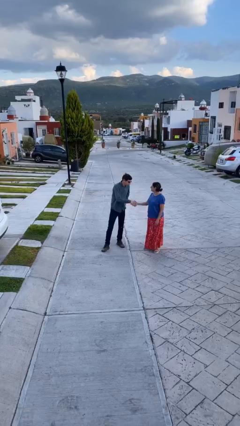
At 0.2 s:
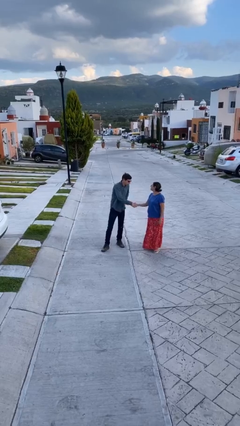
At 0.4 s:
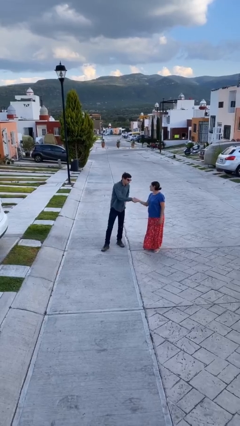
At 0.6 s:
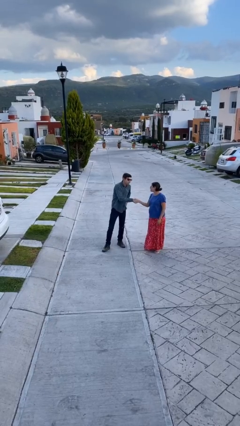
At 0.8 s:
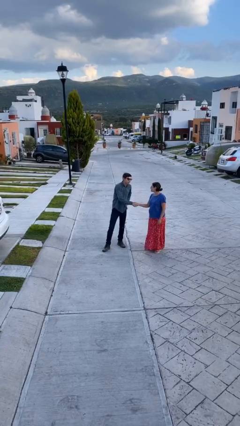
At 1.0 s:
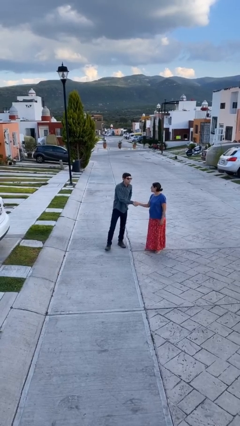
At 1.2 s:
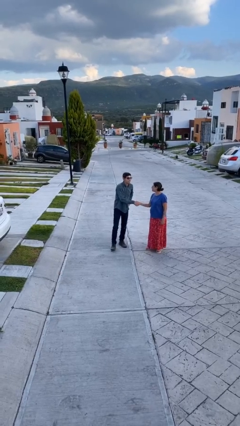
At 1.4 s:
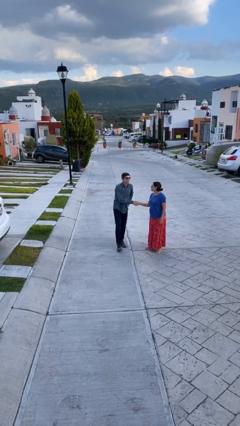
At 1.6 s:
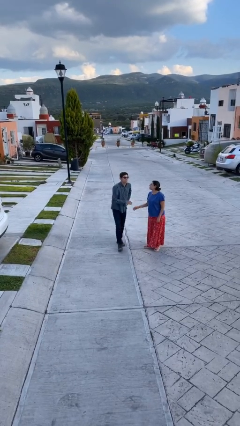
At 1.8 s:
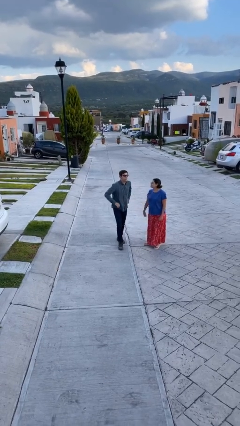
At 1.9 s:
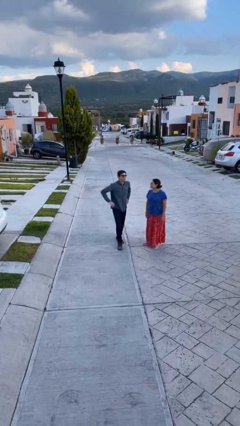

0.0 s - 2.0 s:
person shakes hand

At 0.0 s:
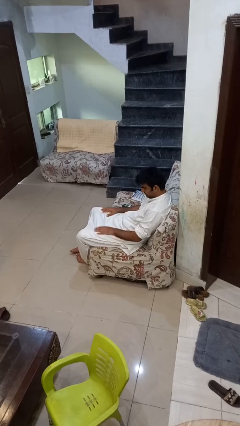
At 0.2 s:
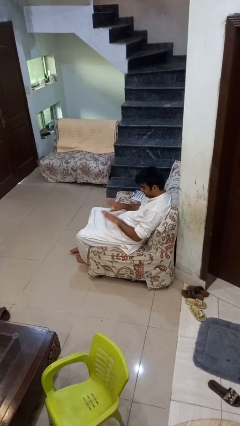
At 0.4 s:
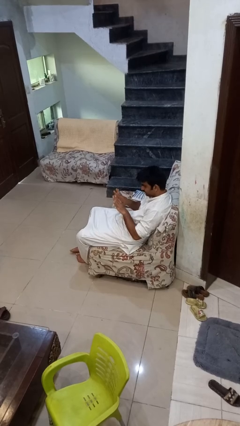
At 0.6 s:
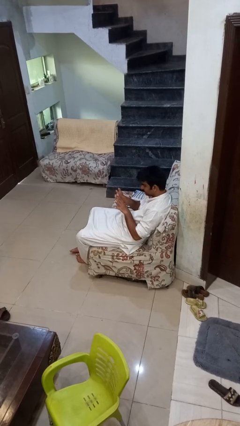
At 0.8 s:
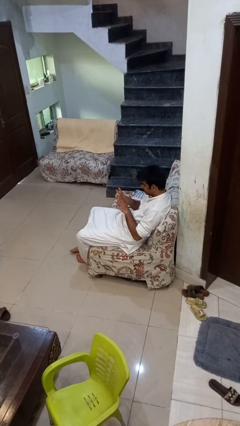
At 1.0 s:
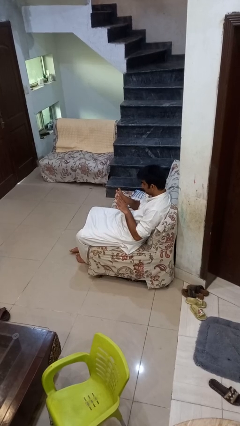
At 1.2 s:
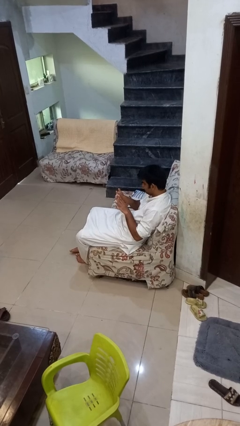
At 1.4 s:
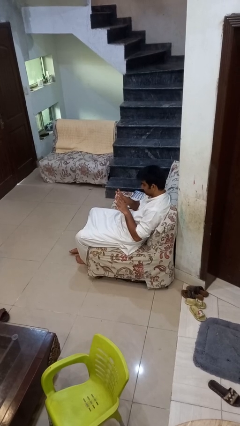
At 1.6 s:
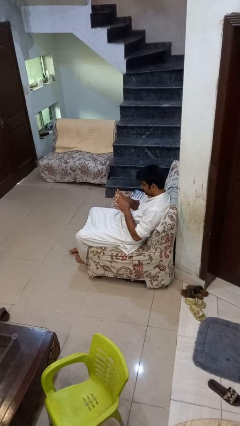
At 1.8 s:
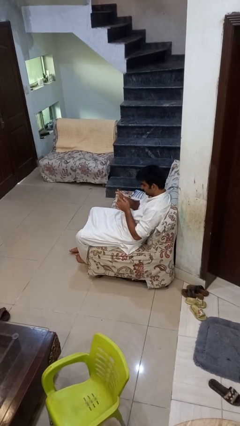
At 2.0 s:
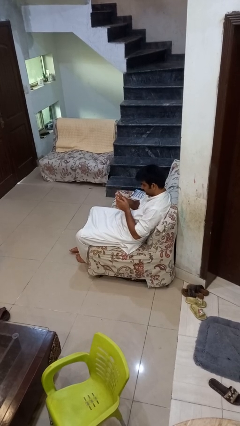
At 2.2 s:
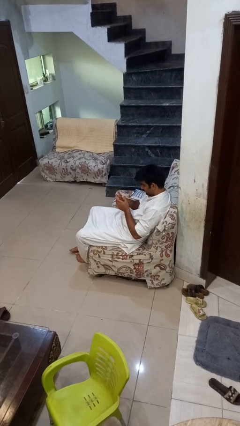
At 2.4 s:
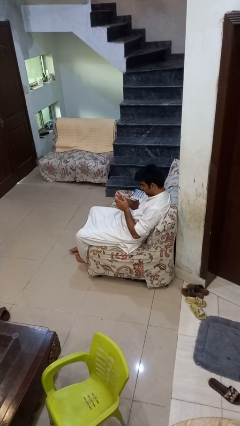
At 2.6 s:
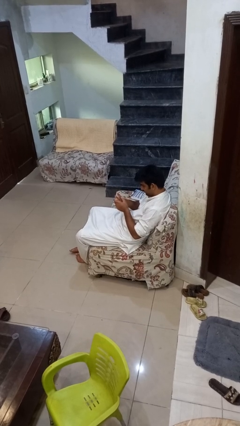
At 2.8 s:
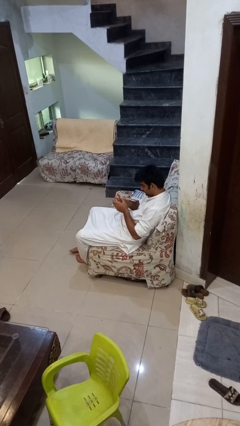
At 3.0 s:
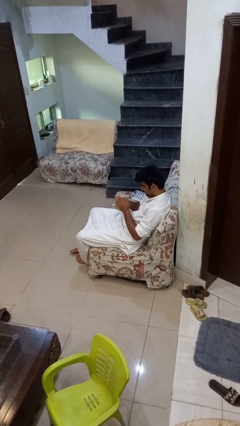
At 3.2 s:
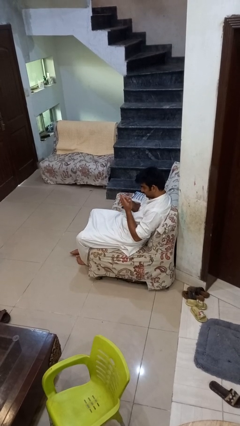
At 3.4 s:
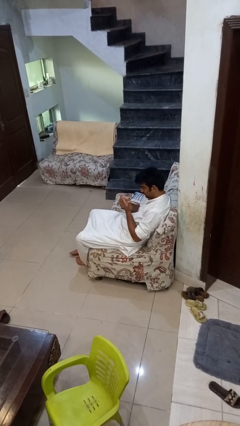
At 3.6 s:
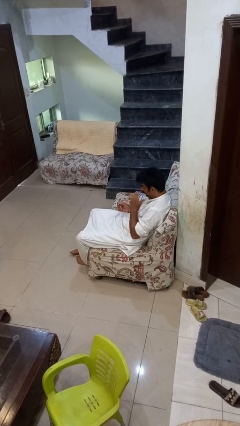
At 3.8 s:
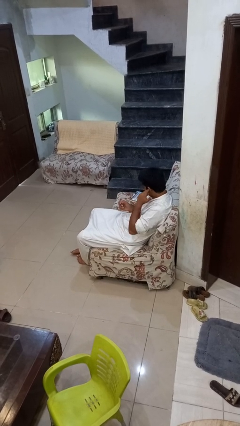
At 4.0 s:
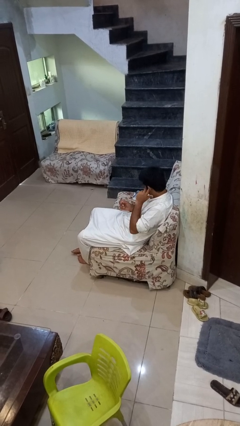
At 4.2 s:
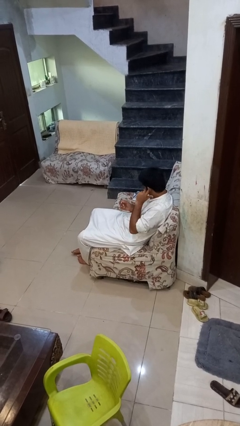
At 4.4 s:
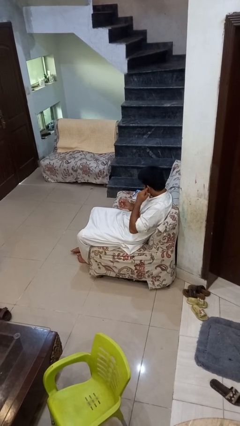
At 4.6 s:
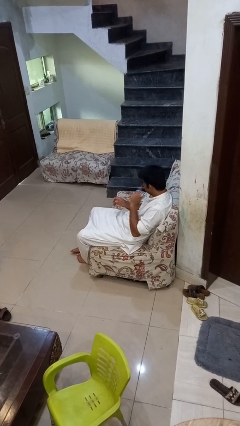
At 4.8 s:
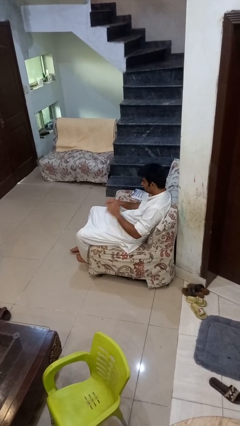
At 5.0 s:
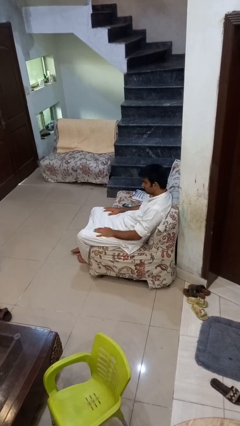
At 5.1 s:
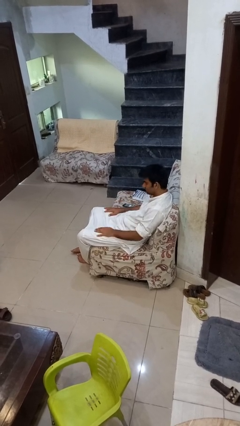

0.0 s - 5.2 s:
person looks at hands in lap

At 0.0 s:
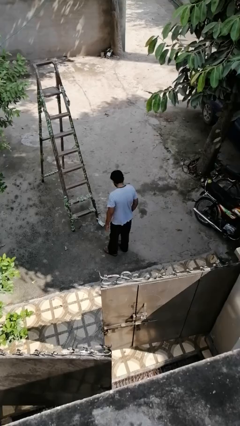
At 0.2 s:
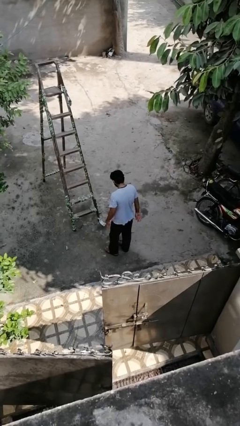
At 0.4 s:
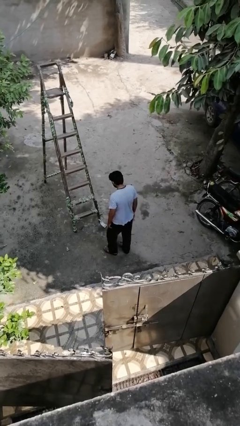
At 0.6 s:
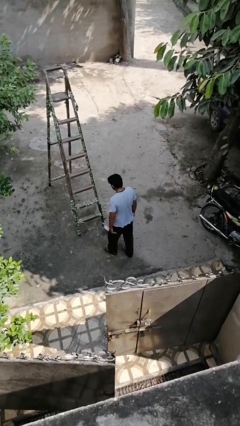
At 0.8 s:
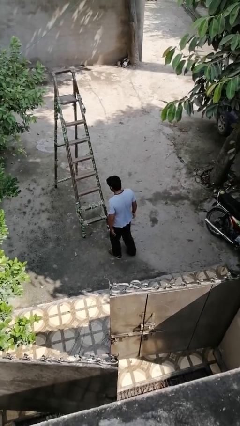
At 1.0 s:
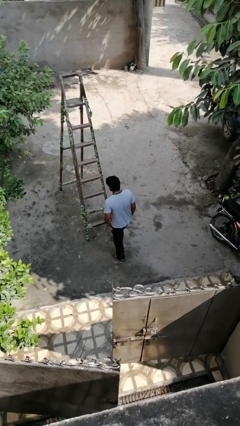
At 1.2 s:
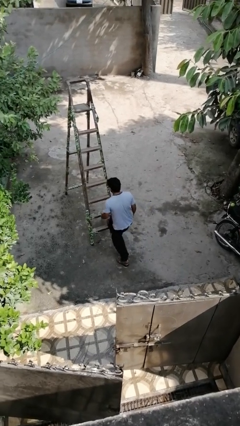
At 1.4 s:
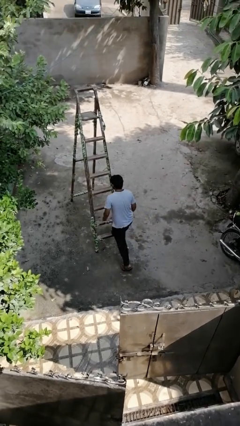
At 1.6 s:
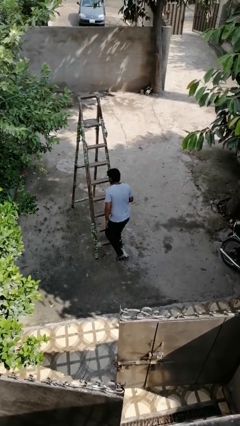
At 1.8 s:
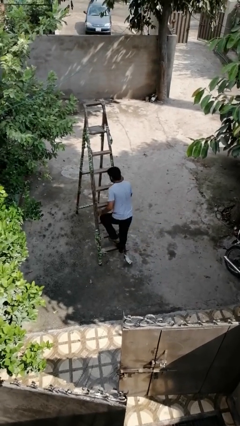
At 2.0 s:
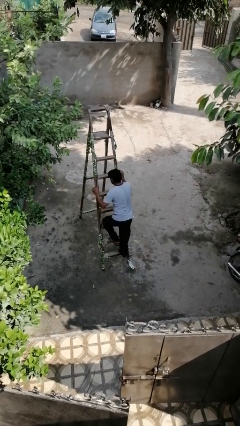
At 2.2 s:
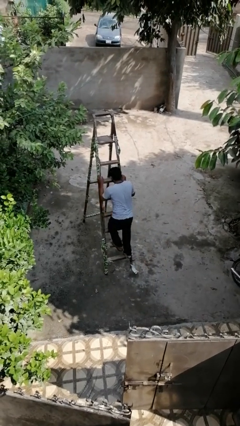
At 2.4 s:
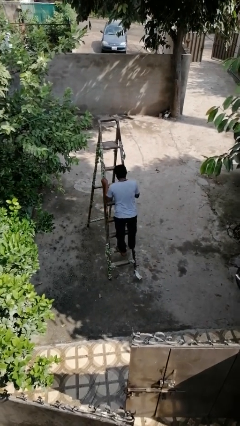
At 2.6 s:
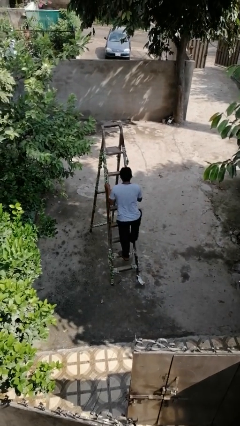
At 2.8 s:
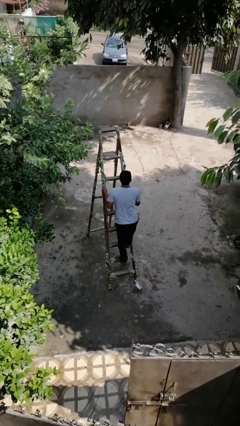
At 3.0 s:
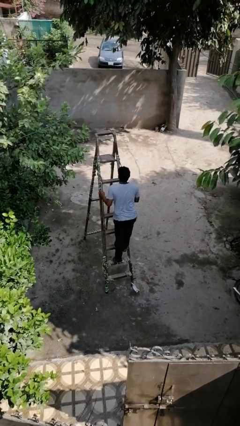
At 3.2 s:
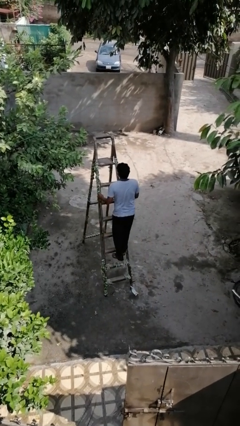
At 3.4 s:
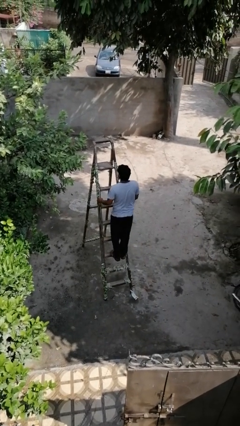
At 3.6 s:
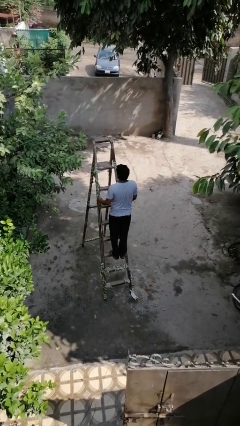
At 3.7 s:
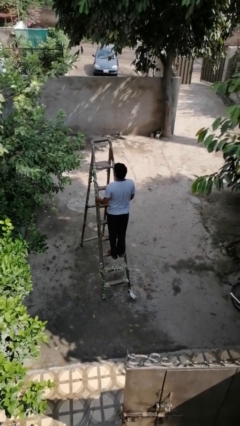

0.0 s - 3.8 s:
person climbs up ladder

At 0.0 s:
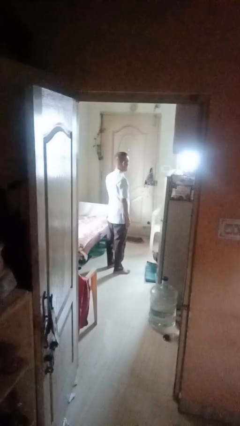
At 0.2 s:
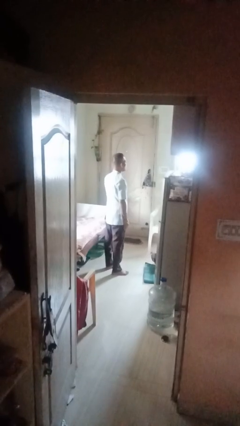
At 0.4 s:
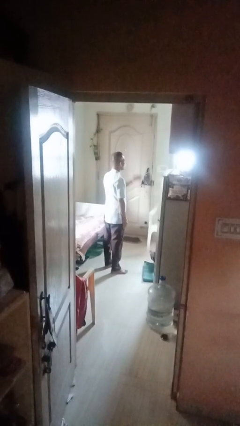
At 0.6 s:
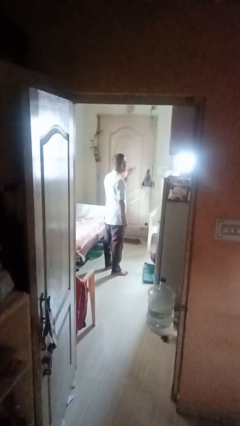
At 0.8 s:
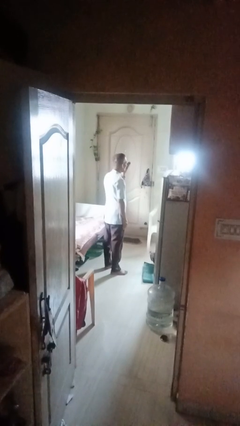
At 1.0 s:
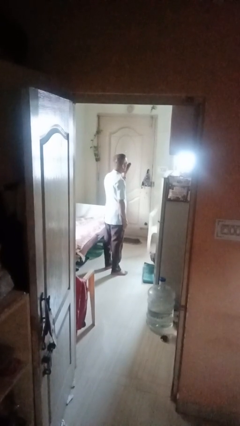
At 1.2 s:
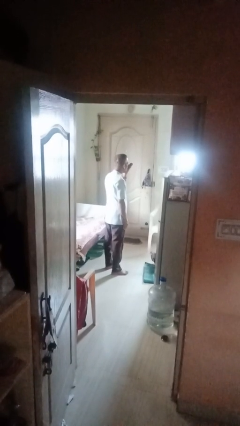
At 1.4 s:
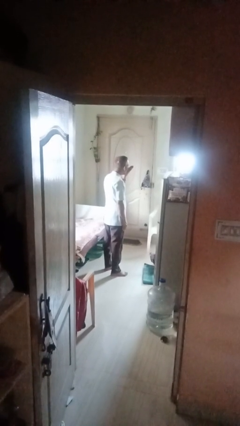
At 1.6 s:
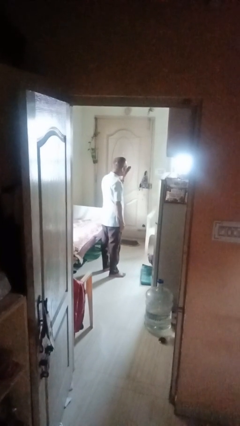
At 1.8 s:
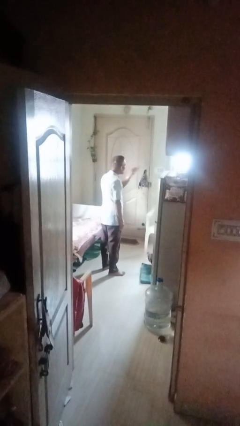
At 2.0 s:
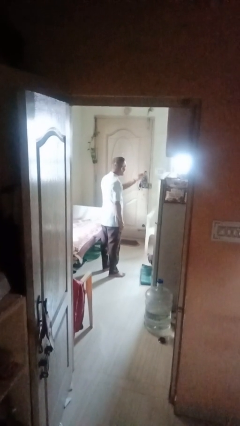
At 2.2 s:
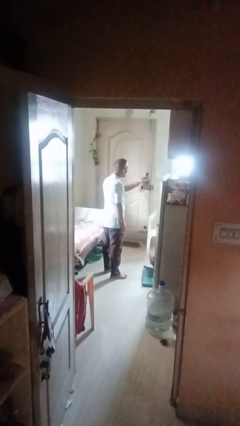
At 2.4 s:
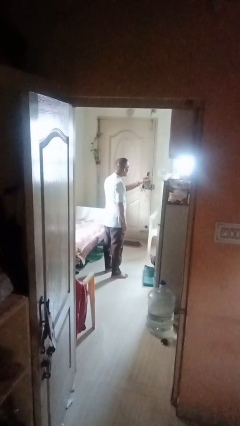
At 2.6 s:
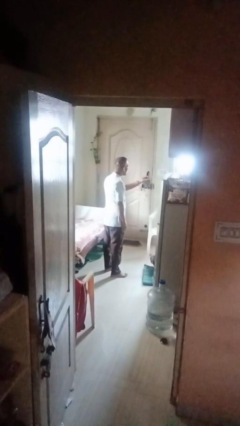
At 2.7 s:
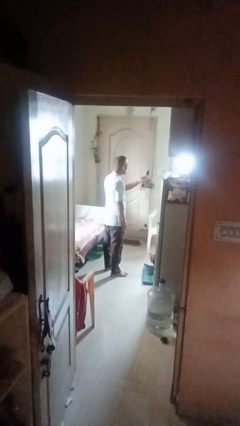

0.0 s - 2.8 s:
person gestures blow kiss

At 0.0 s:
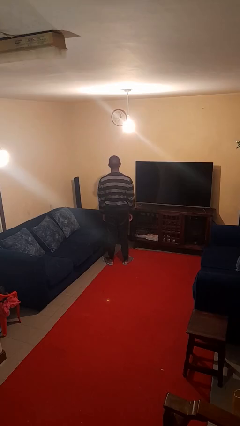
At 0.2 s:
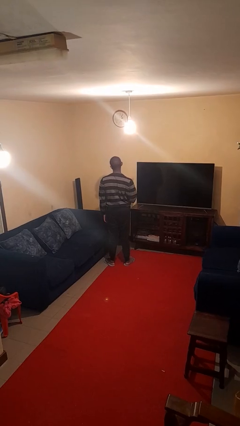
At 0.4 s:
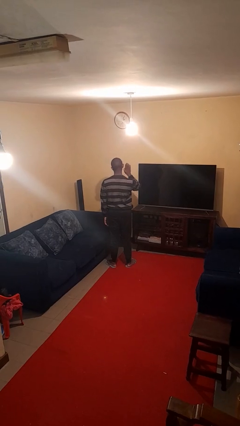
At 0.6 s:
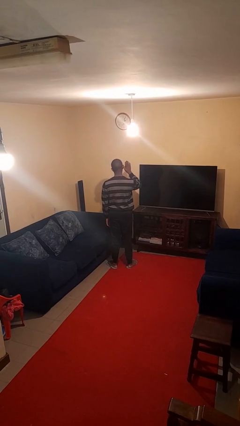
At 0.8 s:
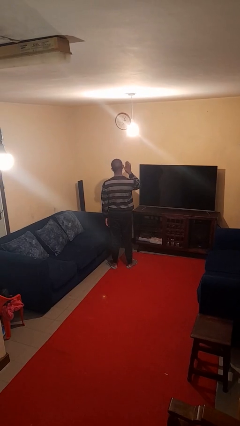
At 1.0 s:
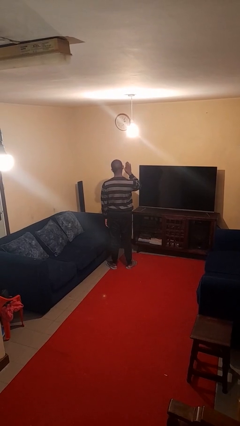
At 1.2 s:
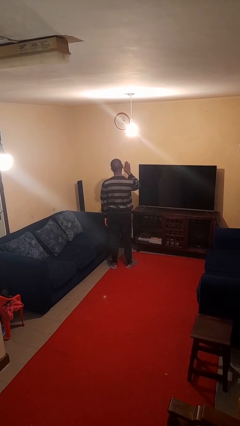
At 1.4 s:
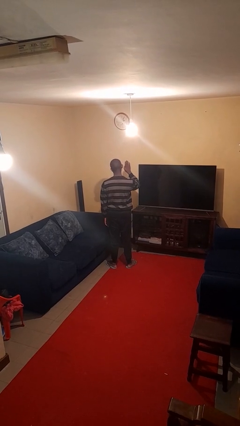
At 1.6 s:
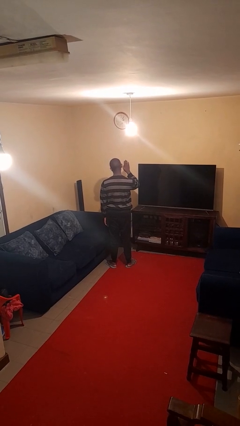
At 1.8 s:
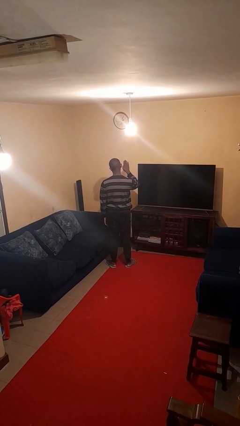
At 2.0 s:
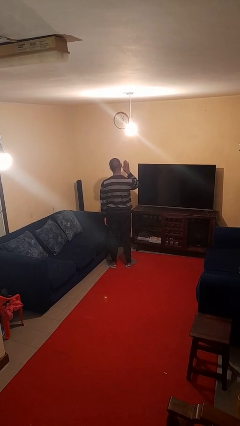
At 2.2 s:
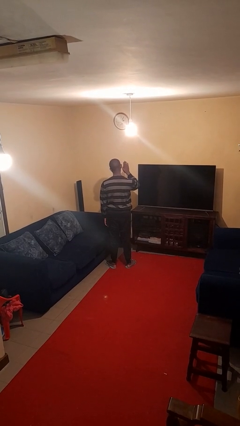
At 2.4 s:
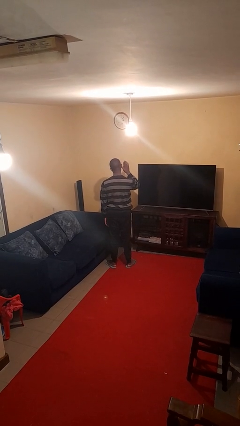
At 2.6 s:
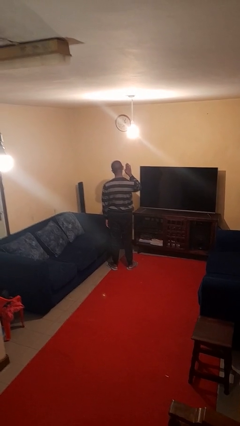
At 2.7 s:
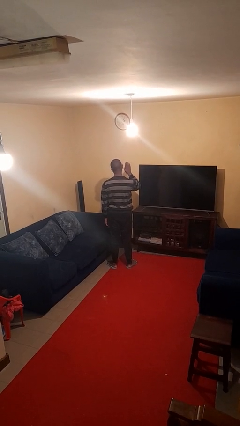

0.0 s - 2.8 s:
person gestures stop

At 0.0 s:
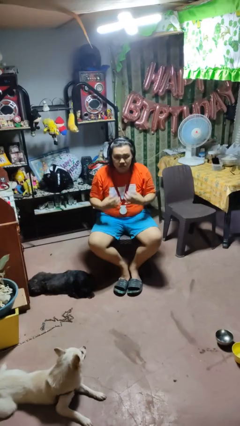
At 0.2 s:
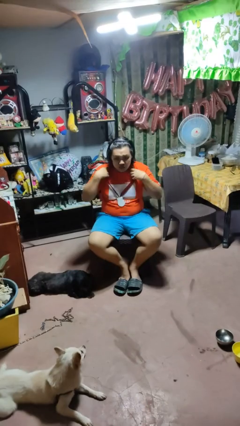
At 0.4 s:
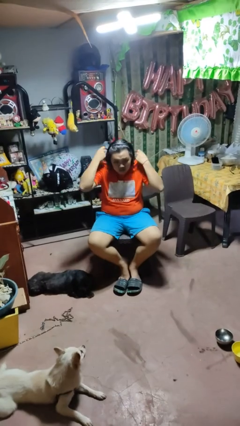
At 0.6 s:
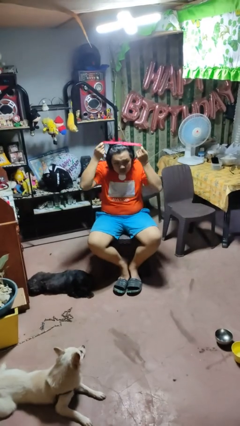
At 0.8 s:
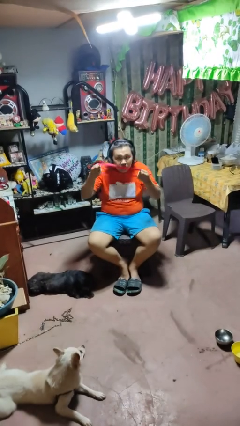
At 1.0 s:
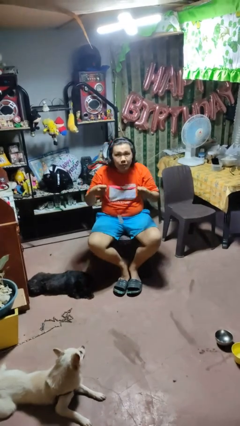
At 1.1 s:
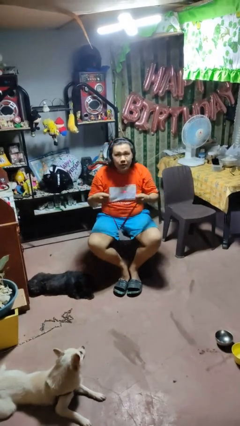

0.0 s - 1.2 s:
person takes off necklace
